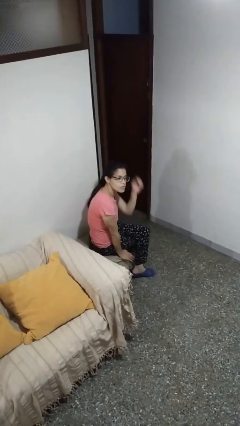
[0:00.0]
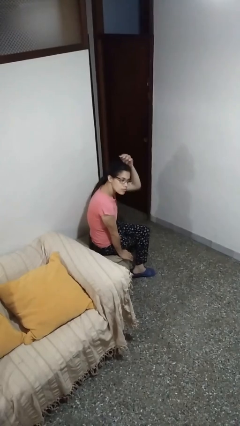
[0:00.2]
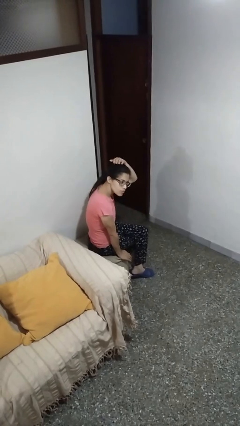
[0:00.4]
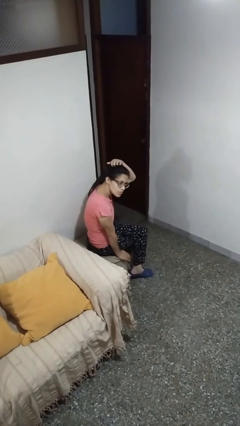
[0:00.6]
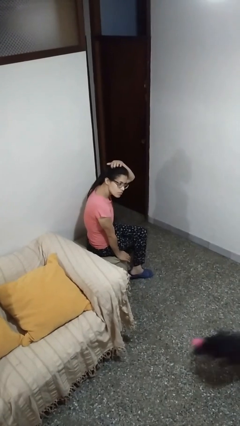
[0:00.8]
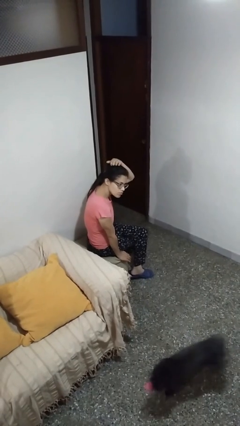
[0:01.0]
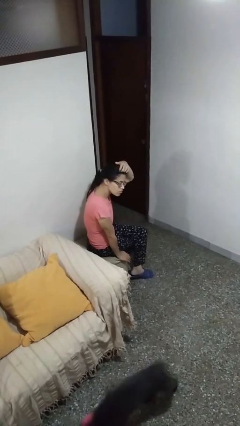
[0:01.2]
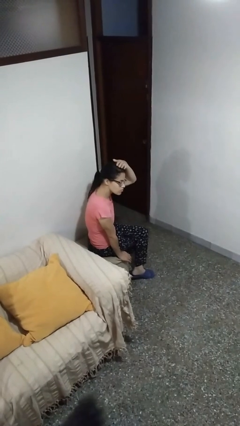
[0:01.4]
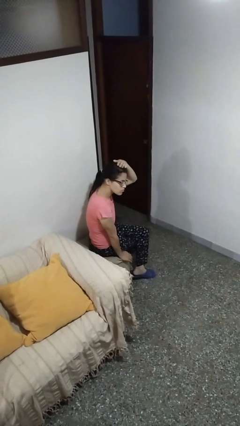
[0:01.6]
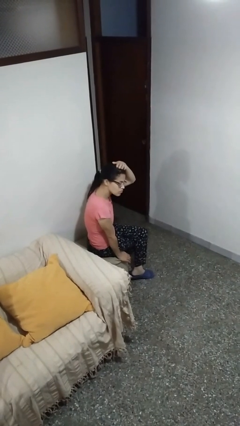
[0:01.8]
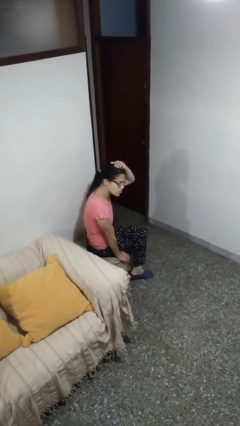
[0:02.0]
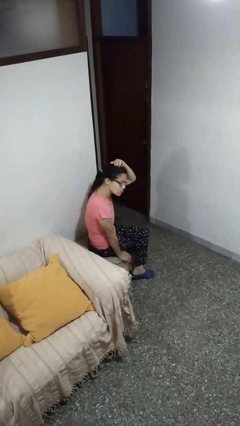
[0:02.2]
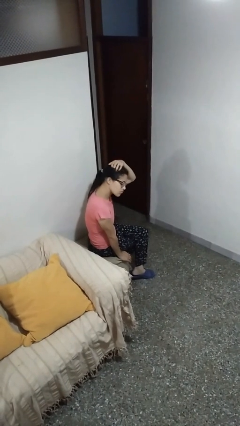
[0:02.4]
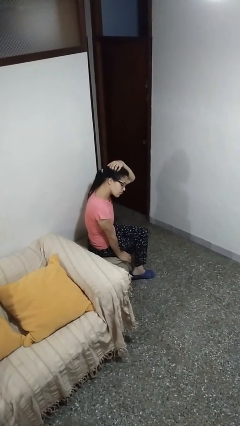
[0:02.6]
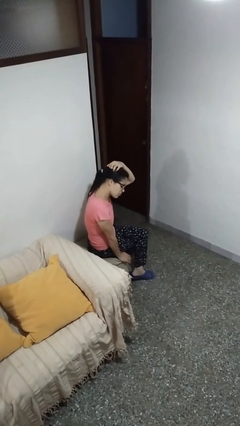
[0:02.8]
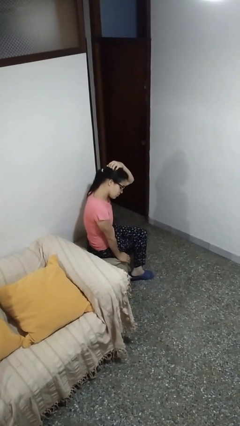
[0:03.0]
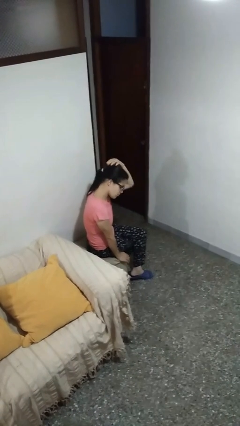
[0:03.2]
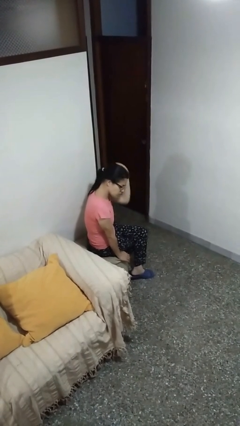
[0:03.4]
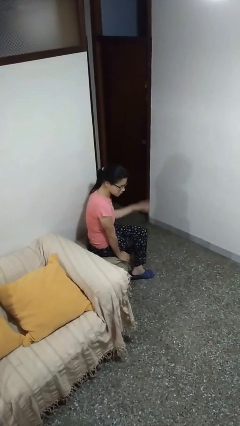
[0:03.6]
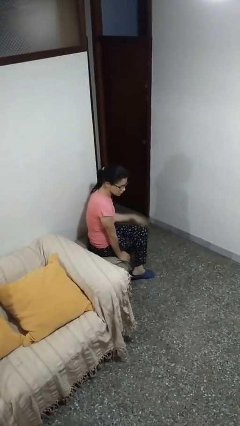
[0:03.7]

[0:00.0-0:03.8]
person scratches face

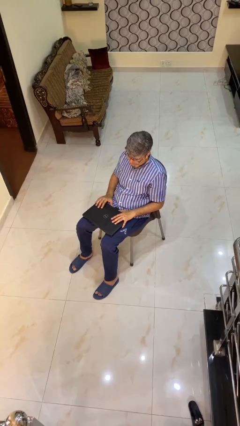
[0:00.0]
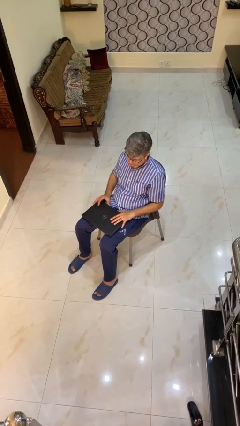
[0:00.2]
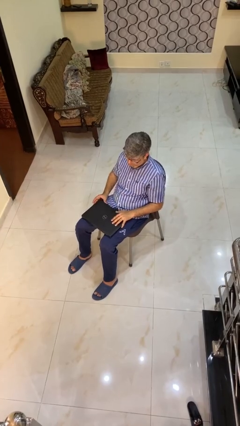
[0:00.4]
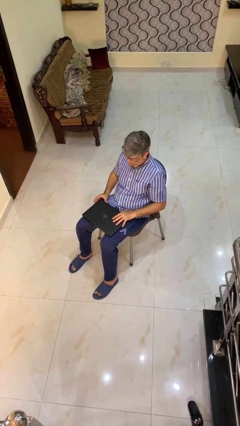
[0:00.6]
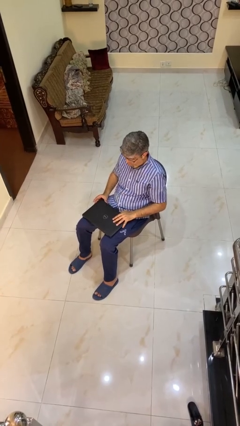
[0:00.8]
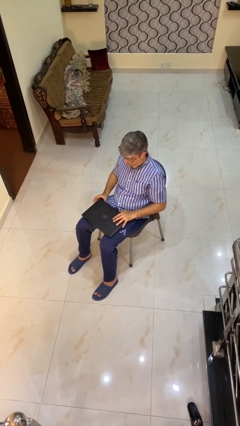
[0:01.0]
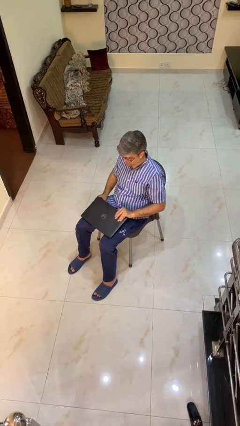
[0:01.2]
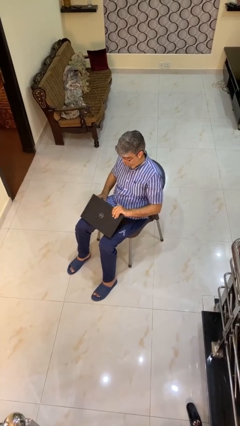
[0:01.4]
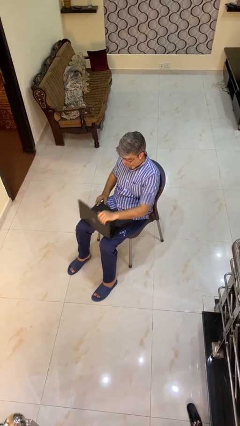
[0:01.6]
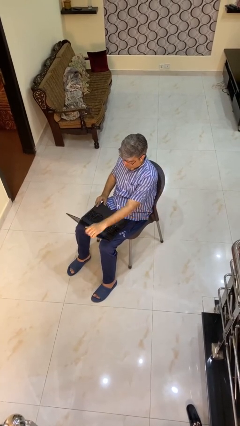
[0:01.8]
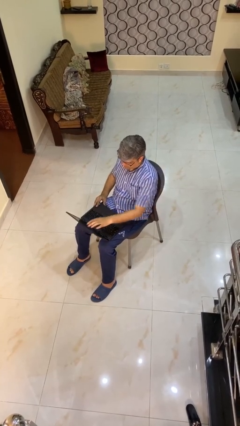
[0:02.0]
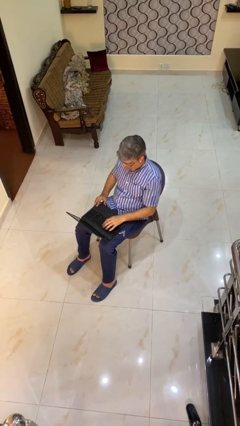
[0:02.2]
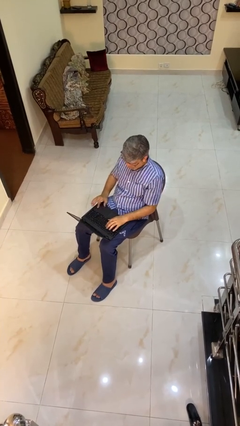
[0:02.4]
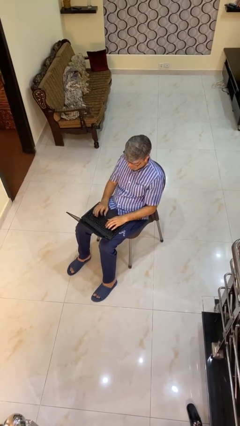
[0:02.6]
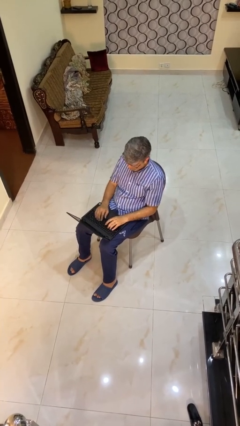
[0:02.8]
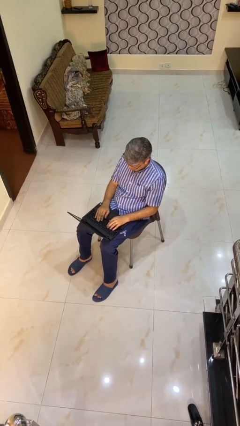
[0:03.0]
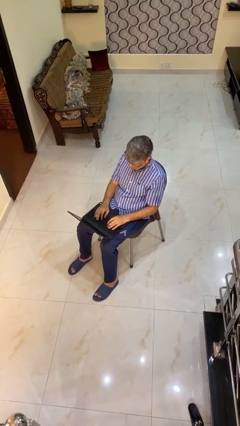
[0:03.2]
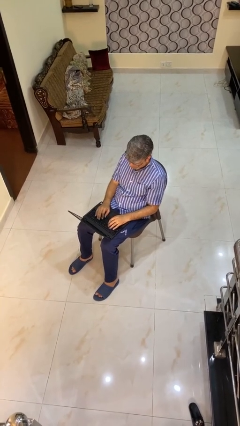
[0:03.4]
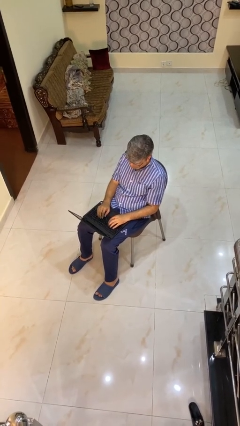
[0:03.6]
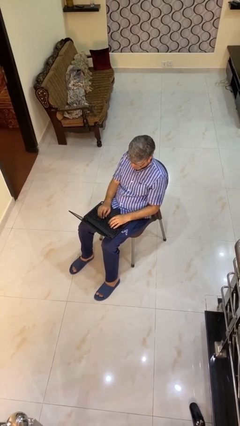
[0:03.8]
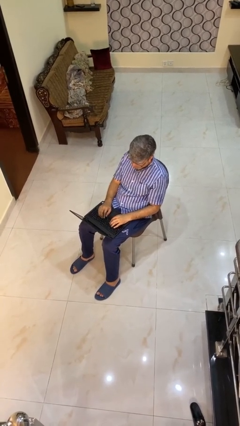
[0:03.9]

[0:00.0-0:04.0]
person opens laptop

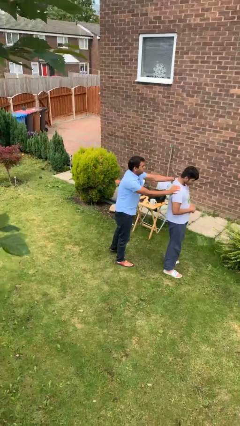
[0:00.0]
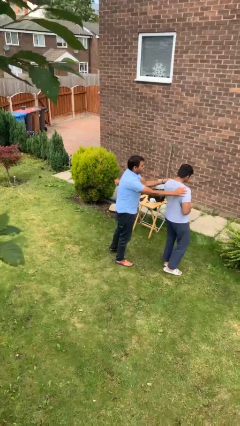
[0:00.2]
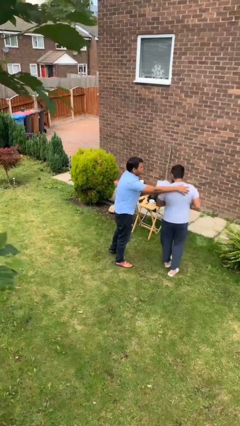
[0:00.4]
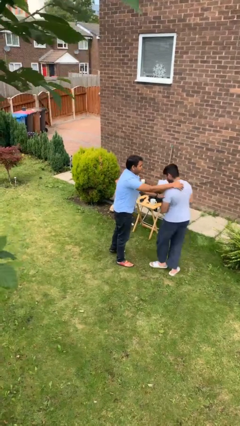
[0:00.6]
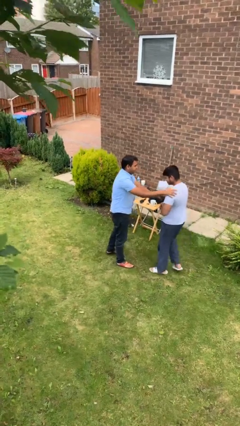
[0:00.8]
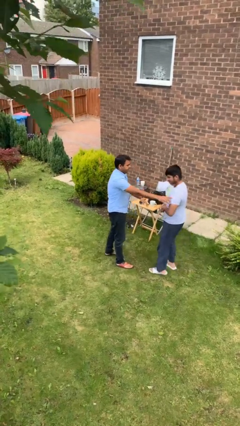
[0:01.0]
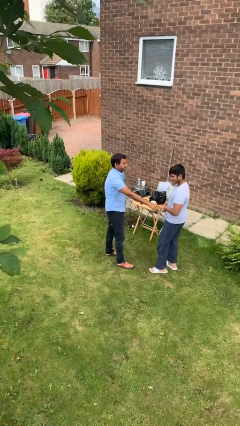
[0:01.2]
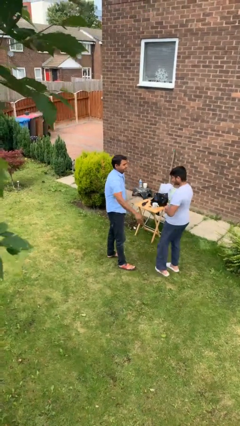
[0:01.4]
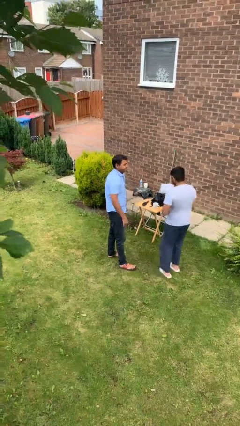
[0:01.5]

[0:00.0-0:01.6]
person spins person around

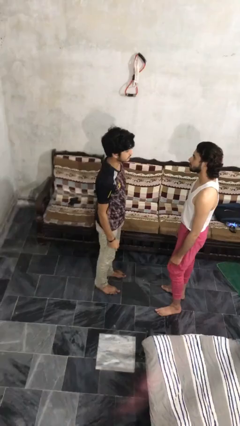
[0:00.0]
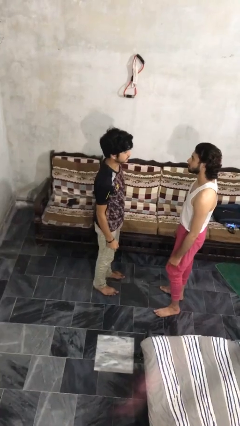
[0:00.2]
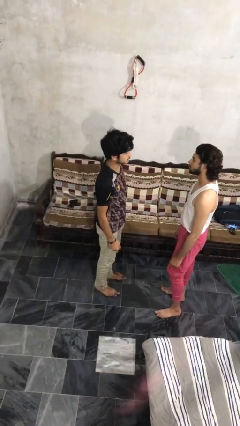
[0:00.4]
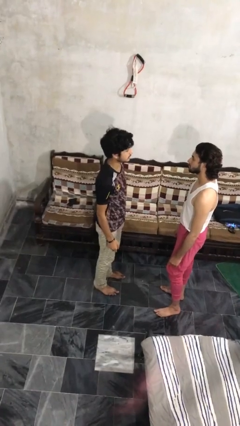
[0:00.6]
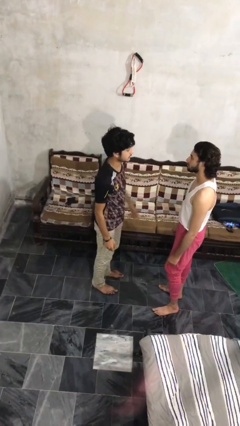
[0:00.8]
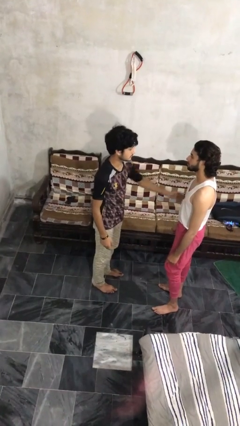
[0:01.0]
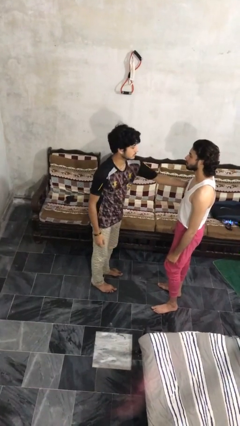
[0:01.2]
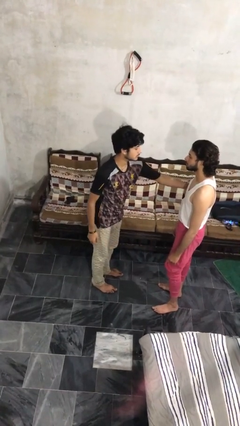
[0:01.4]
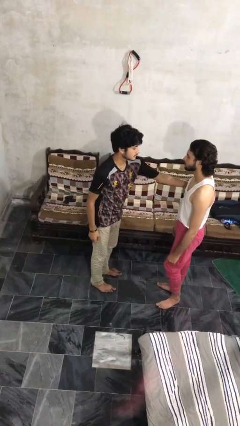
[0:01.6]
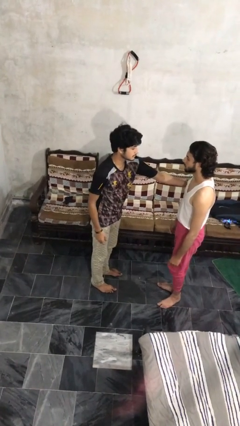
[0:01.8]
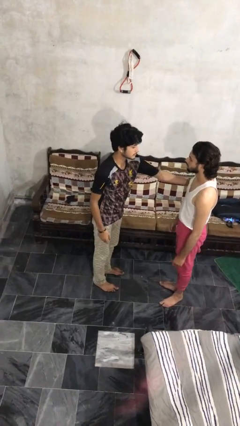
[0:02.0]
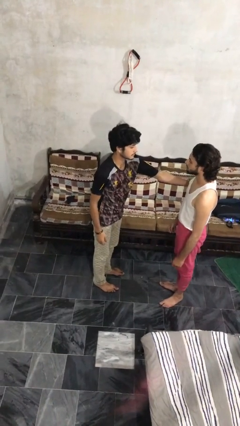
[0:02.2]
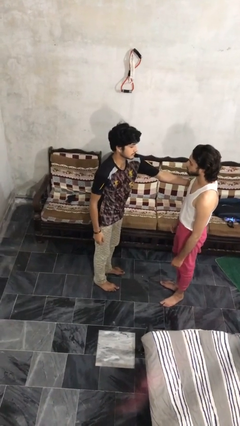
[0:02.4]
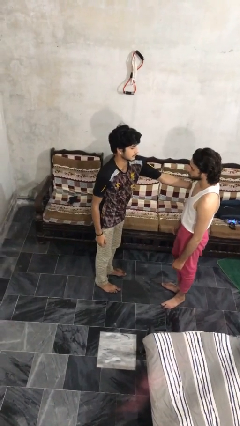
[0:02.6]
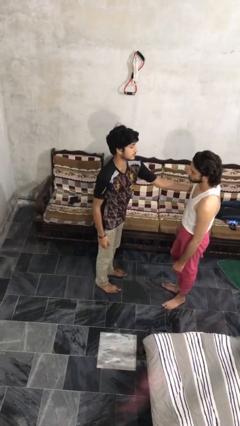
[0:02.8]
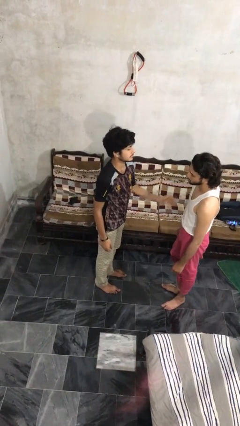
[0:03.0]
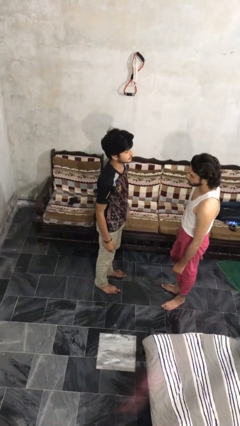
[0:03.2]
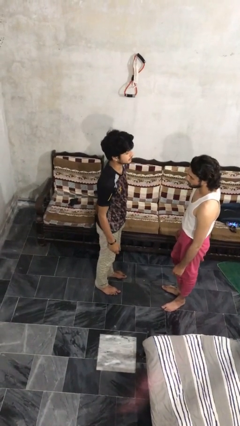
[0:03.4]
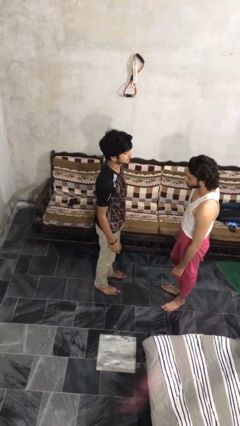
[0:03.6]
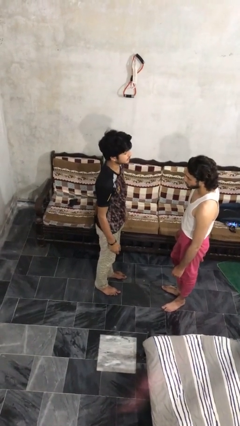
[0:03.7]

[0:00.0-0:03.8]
person grabs person by bicep

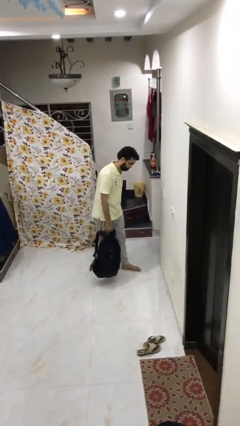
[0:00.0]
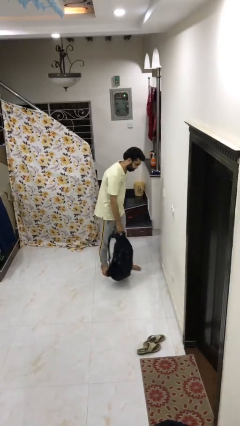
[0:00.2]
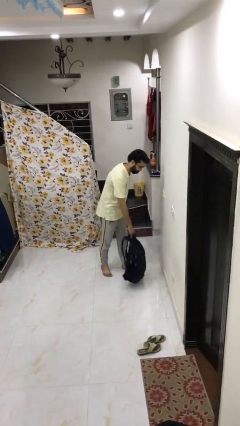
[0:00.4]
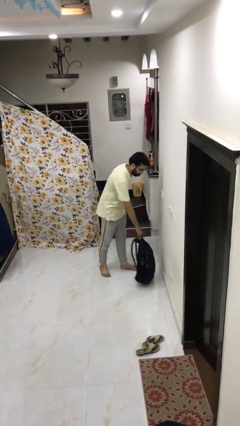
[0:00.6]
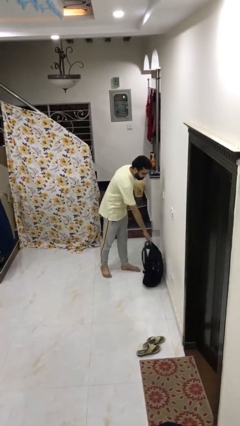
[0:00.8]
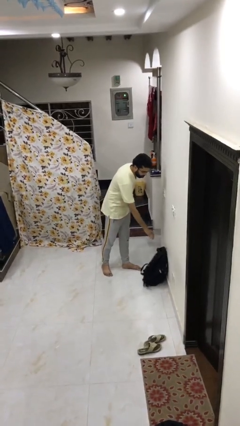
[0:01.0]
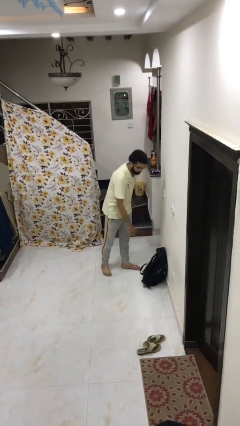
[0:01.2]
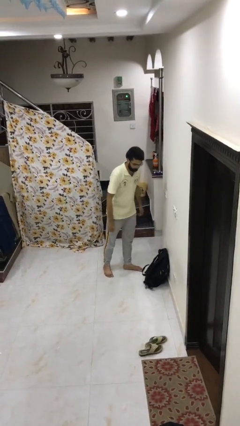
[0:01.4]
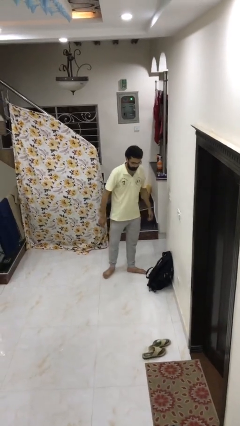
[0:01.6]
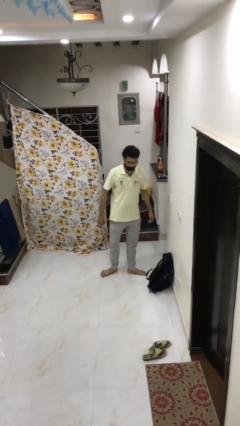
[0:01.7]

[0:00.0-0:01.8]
person puts down object on floor

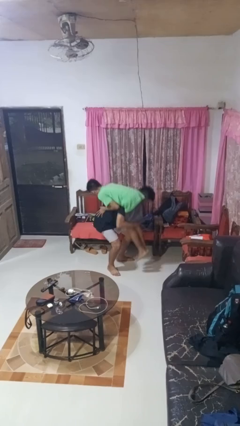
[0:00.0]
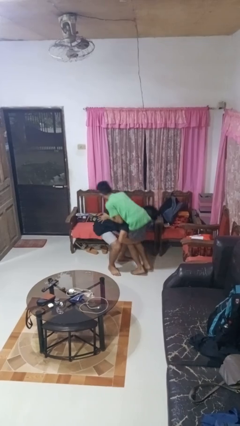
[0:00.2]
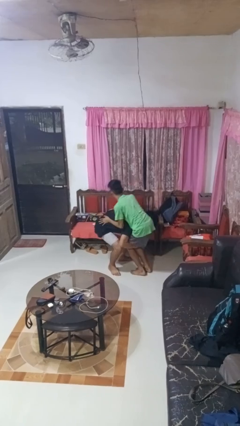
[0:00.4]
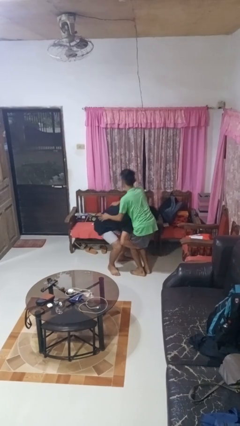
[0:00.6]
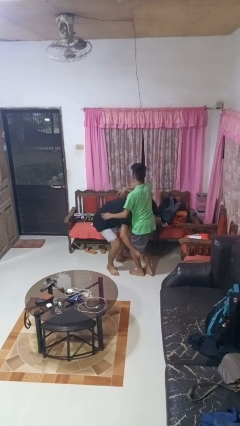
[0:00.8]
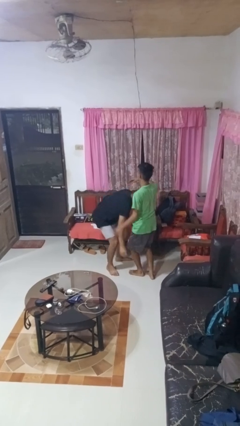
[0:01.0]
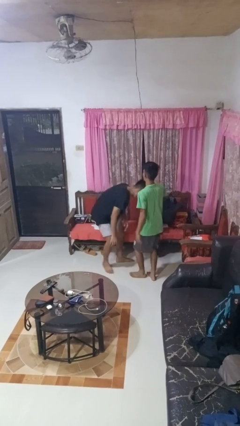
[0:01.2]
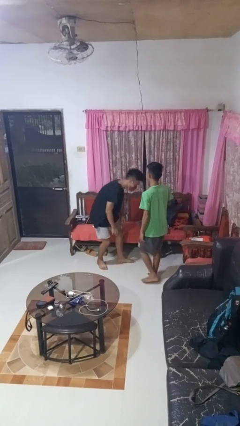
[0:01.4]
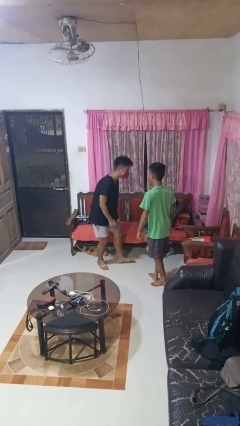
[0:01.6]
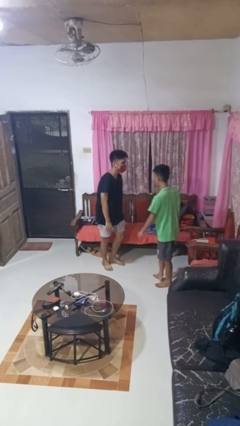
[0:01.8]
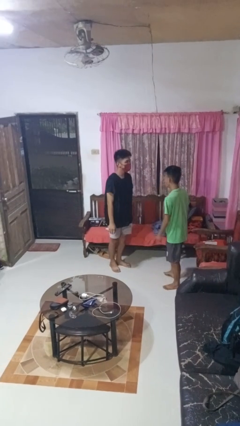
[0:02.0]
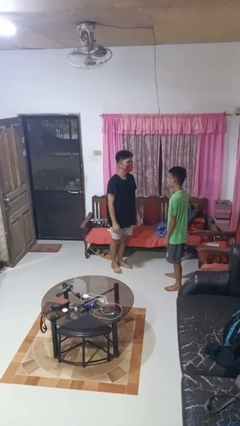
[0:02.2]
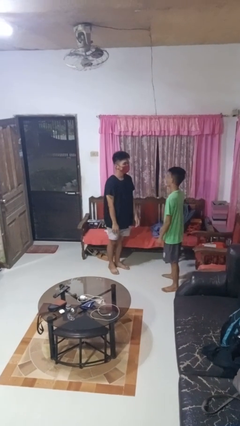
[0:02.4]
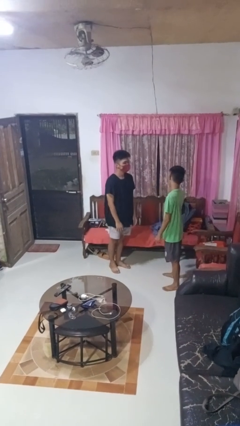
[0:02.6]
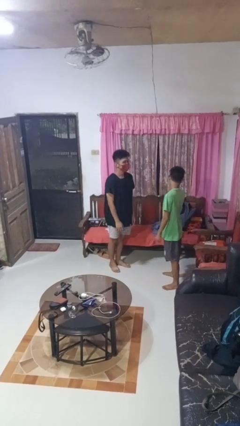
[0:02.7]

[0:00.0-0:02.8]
person puts down person
